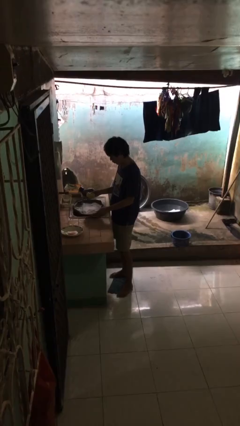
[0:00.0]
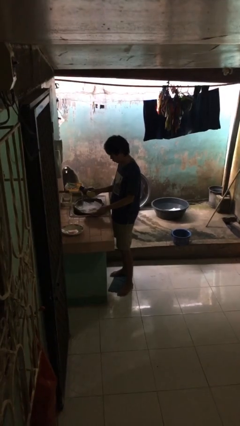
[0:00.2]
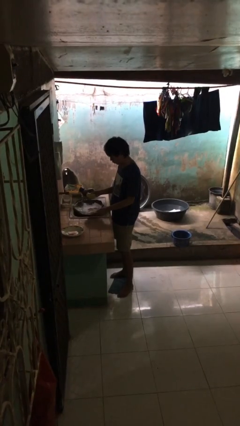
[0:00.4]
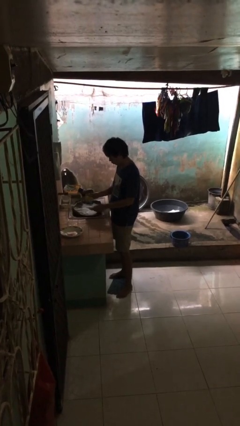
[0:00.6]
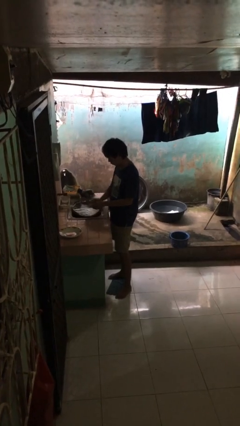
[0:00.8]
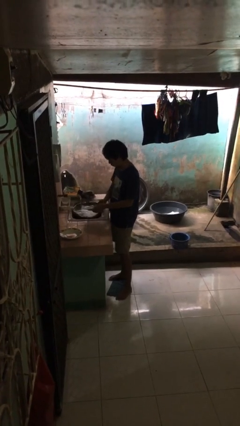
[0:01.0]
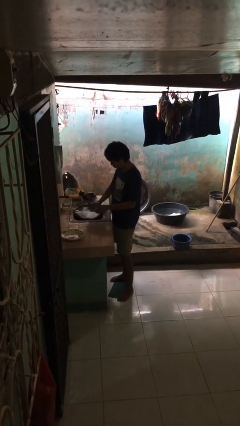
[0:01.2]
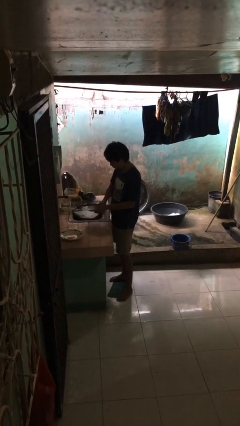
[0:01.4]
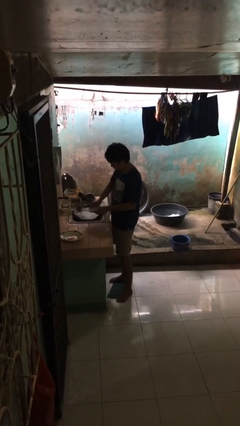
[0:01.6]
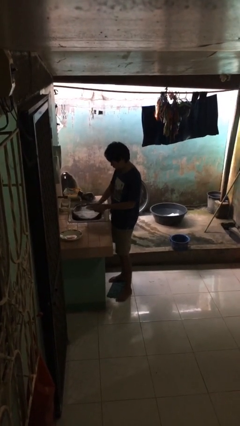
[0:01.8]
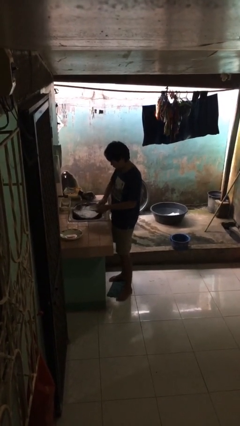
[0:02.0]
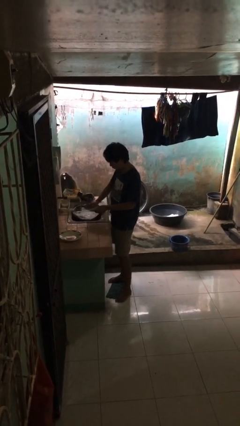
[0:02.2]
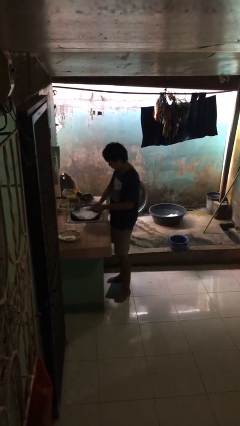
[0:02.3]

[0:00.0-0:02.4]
person washes dish

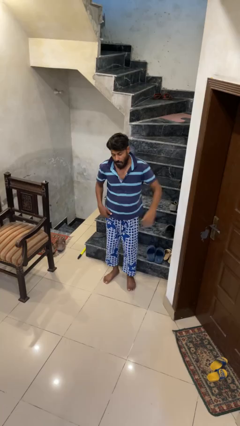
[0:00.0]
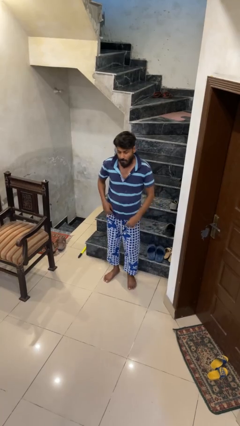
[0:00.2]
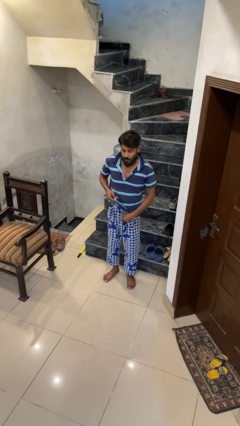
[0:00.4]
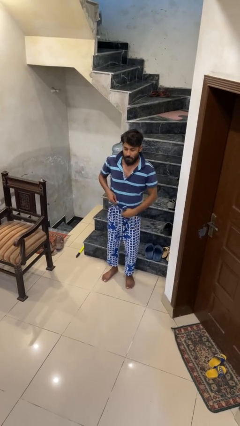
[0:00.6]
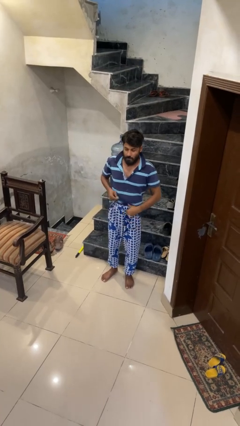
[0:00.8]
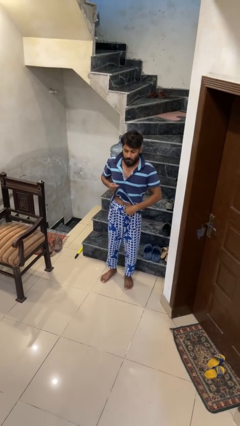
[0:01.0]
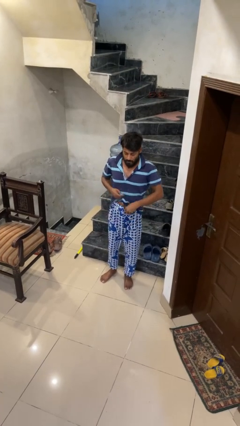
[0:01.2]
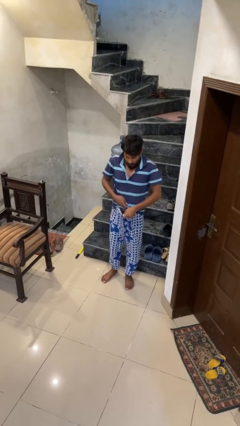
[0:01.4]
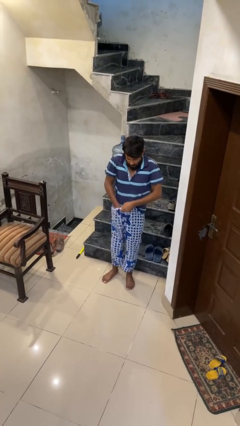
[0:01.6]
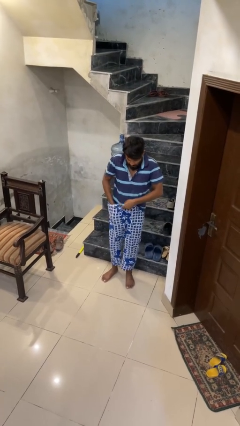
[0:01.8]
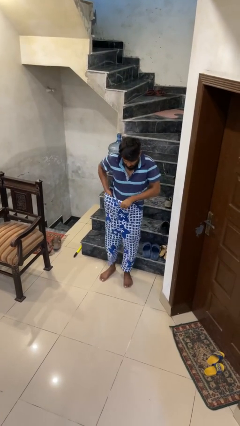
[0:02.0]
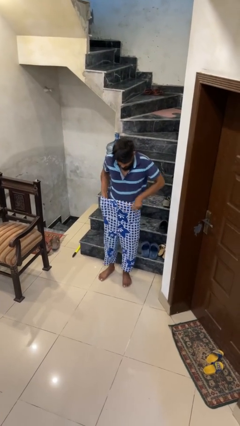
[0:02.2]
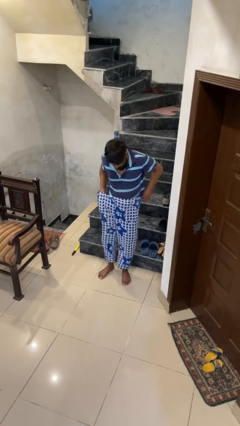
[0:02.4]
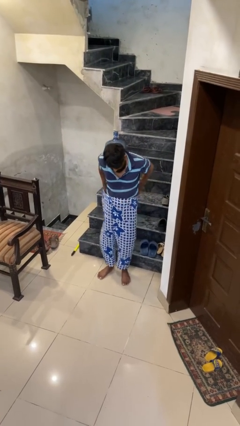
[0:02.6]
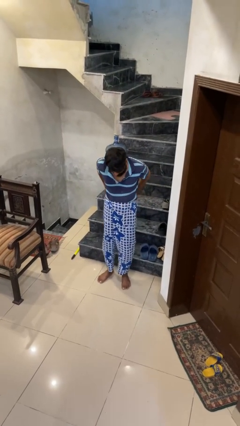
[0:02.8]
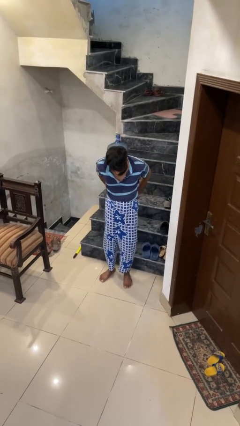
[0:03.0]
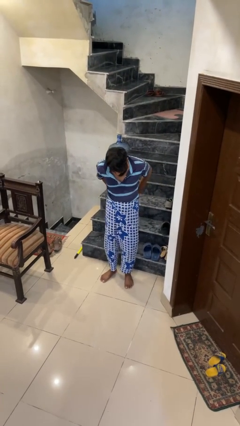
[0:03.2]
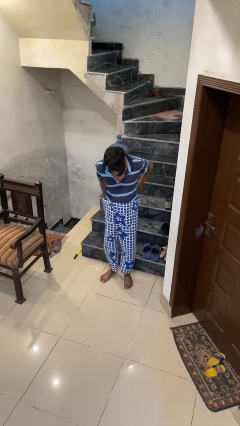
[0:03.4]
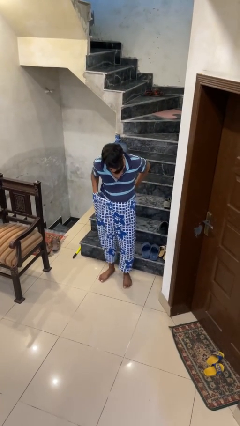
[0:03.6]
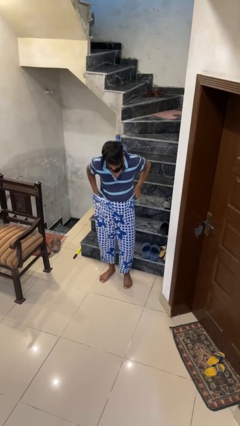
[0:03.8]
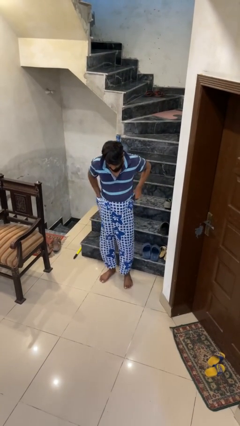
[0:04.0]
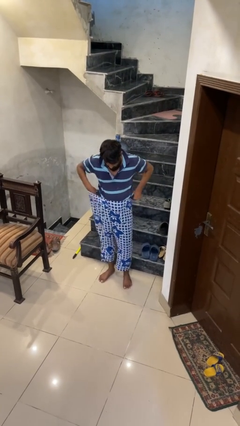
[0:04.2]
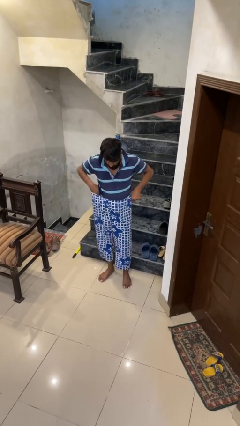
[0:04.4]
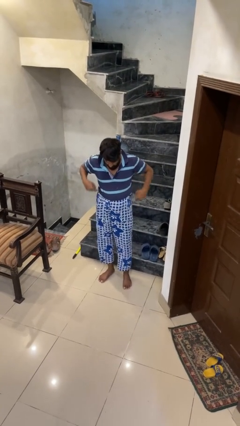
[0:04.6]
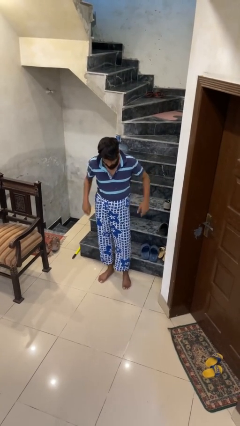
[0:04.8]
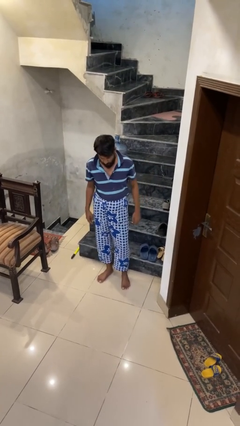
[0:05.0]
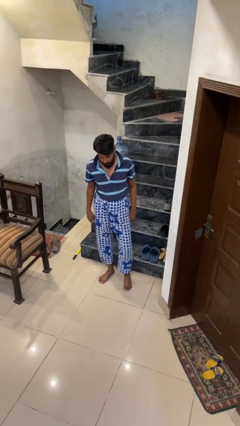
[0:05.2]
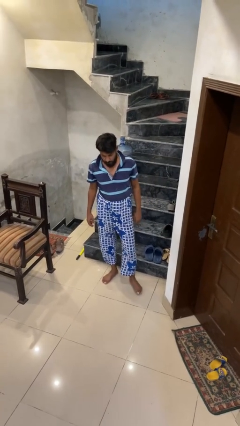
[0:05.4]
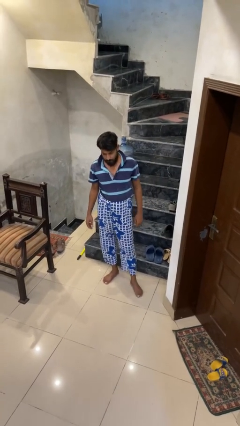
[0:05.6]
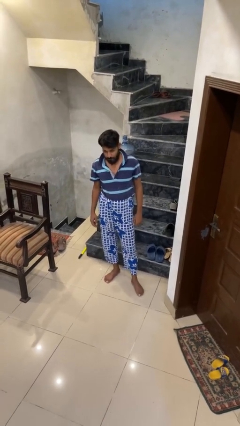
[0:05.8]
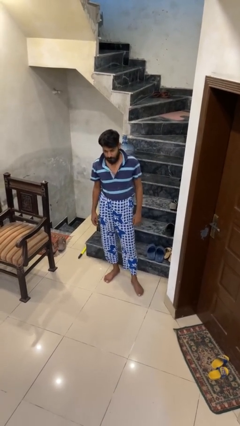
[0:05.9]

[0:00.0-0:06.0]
person tucks in shirt

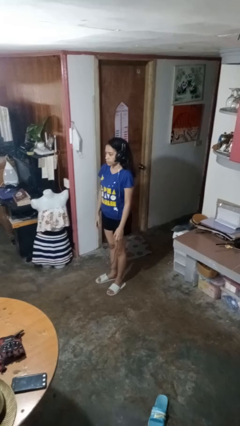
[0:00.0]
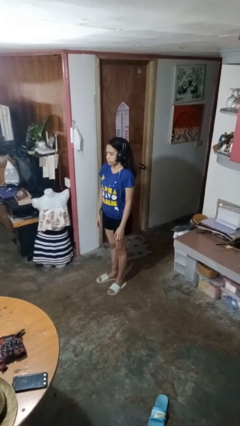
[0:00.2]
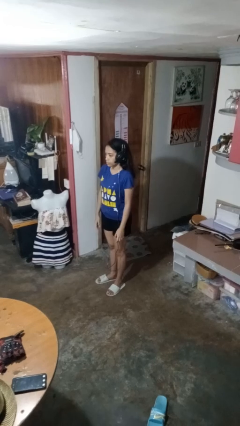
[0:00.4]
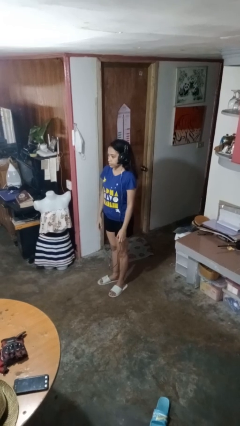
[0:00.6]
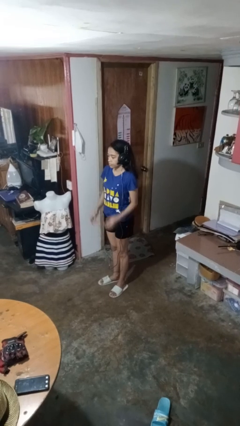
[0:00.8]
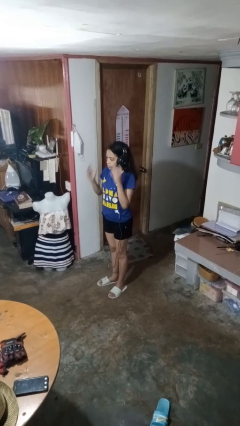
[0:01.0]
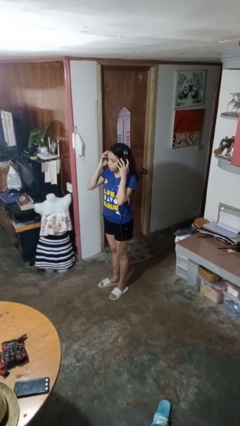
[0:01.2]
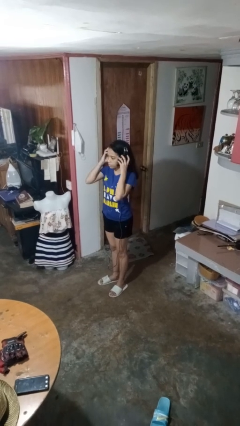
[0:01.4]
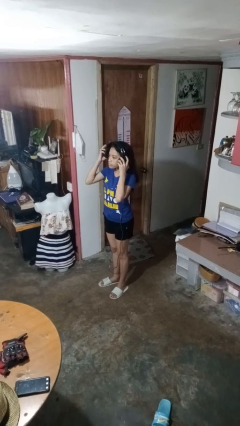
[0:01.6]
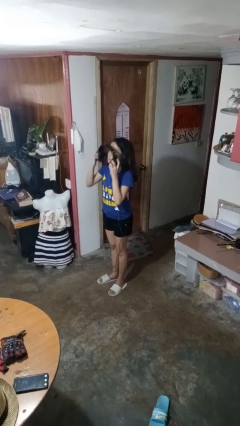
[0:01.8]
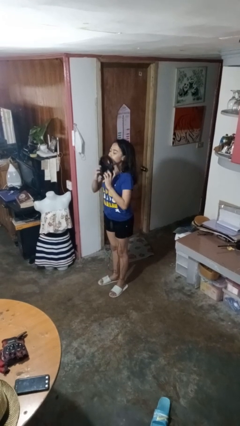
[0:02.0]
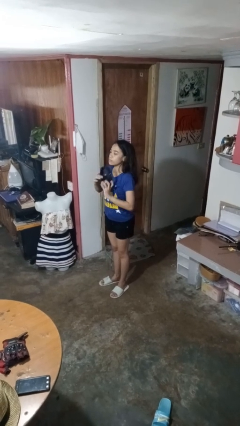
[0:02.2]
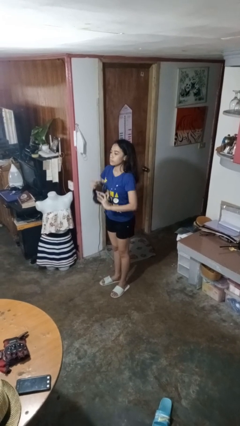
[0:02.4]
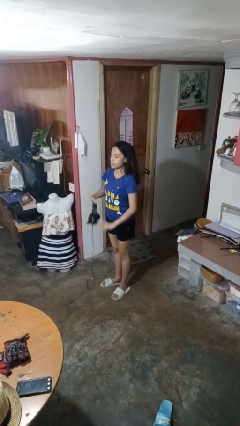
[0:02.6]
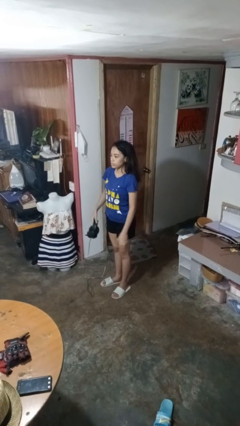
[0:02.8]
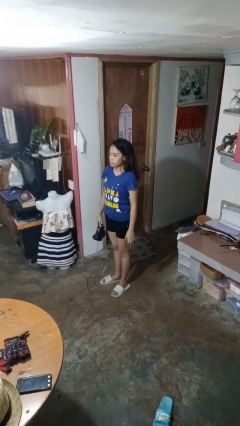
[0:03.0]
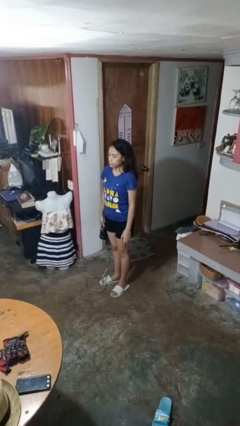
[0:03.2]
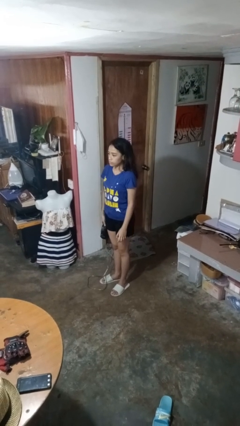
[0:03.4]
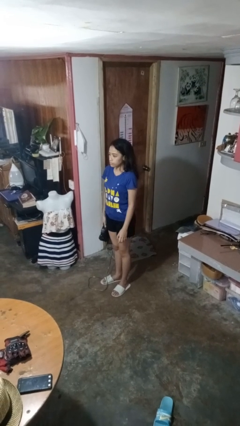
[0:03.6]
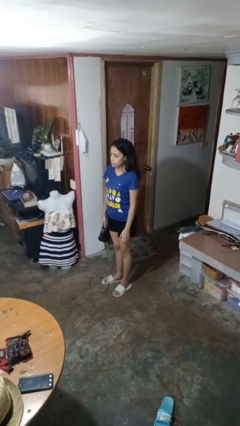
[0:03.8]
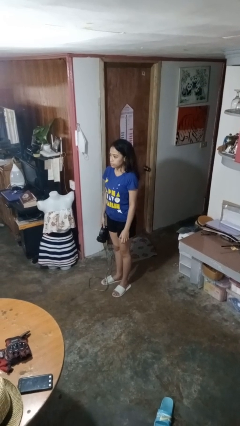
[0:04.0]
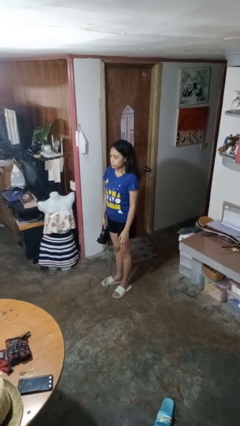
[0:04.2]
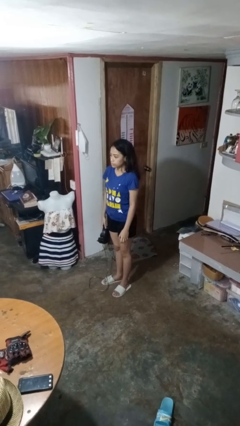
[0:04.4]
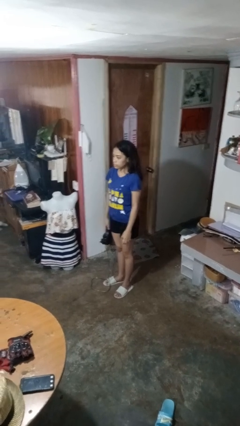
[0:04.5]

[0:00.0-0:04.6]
person takes off headphones

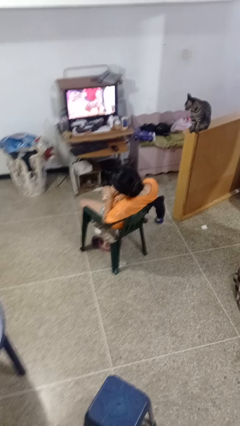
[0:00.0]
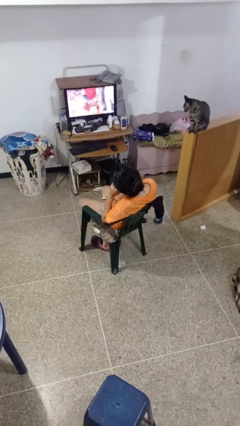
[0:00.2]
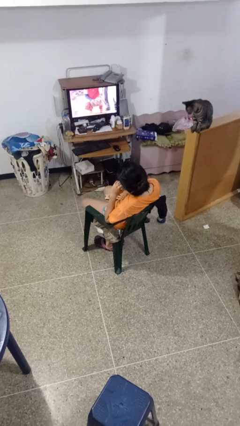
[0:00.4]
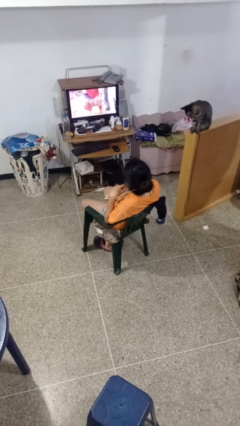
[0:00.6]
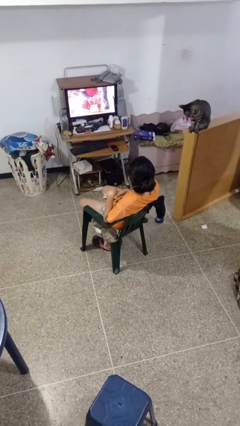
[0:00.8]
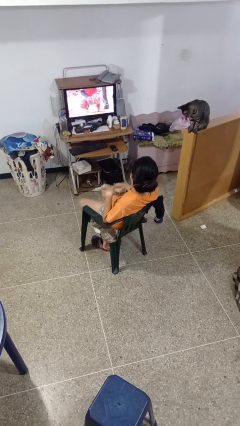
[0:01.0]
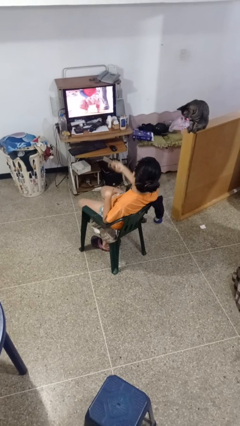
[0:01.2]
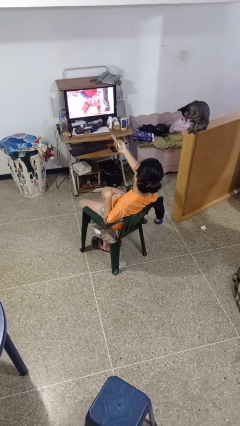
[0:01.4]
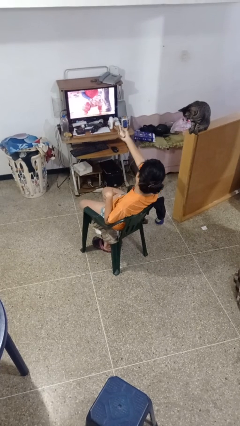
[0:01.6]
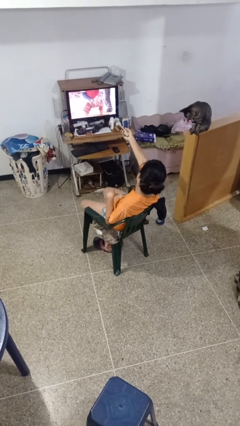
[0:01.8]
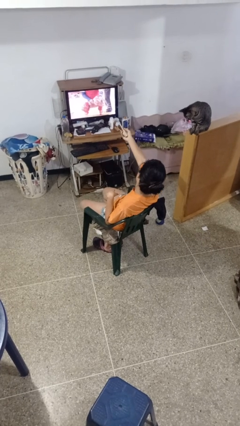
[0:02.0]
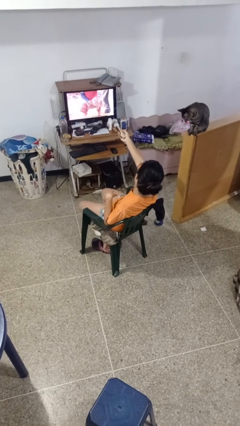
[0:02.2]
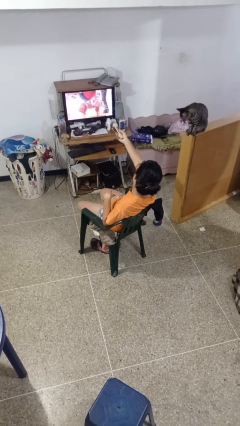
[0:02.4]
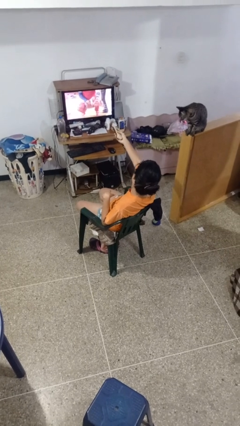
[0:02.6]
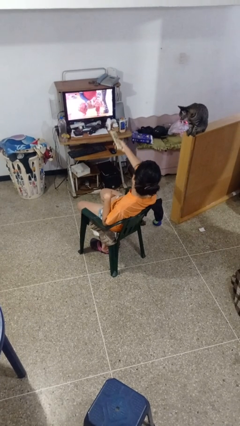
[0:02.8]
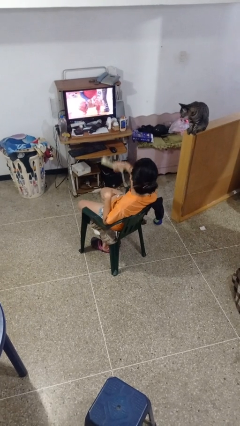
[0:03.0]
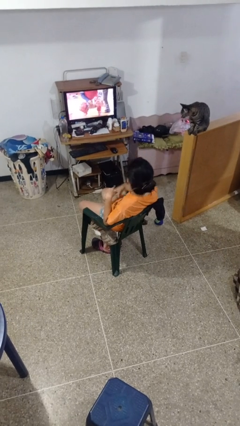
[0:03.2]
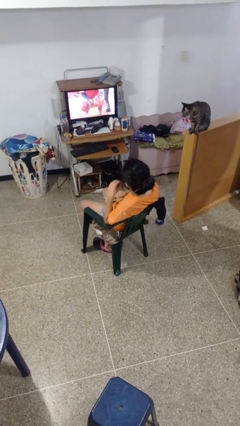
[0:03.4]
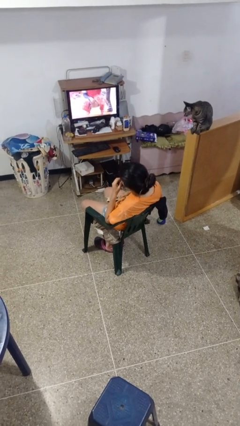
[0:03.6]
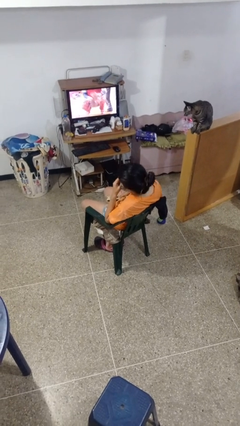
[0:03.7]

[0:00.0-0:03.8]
person uses television remote

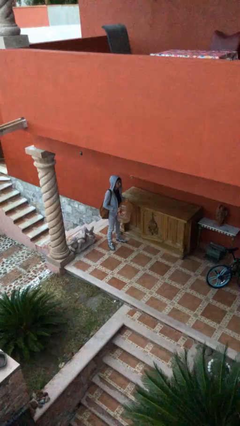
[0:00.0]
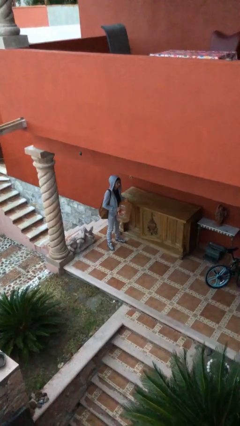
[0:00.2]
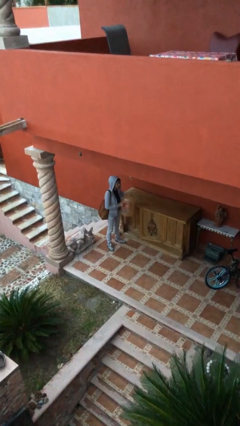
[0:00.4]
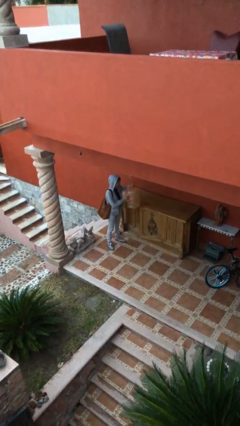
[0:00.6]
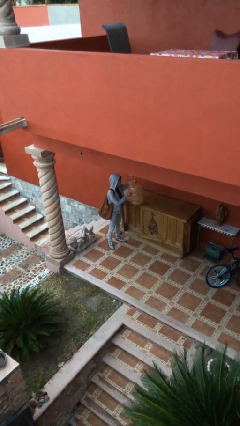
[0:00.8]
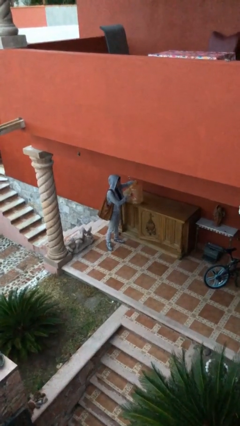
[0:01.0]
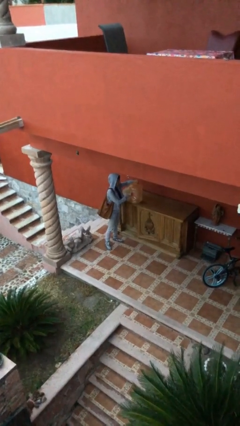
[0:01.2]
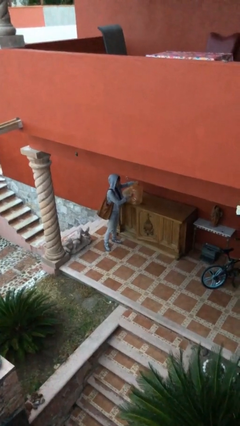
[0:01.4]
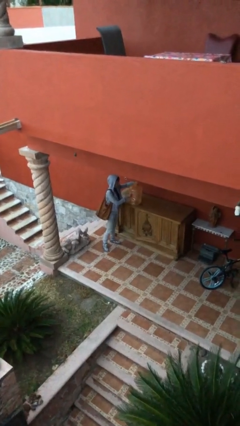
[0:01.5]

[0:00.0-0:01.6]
person puts down object on table
